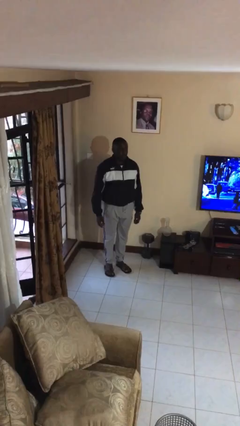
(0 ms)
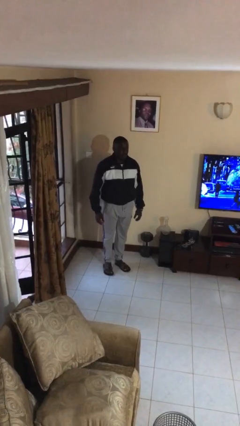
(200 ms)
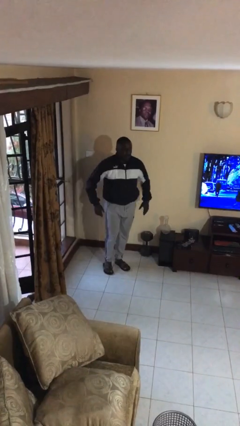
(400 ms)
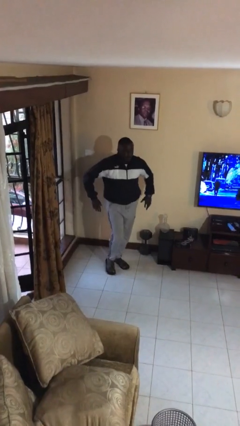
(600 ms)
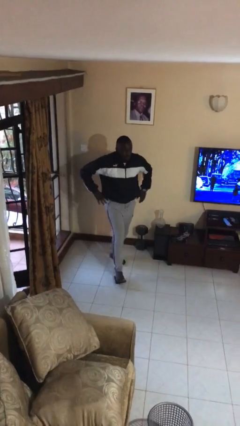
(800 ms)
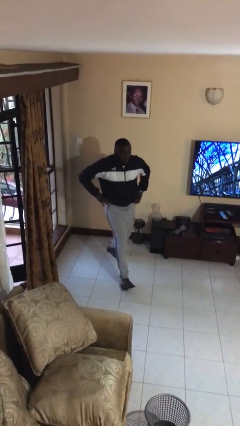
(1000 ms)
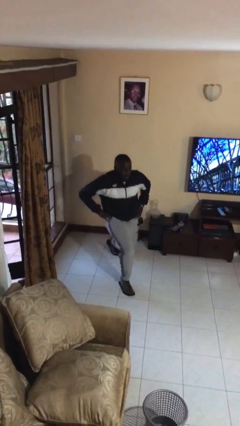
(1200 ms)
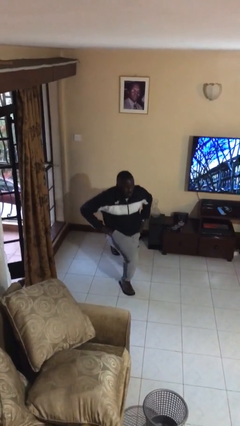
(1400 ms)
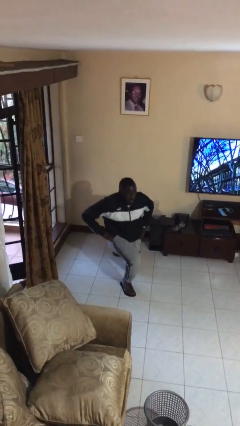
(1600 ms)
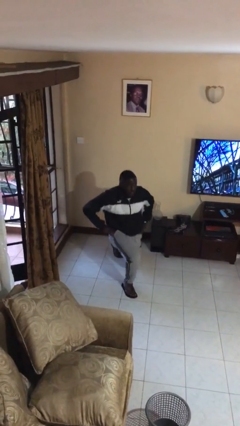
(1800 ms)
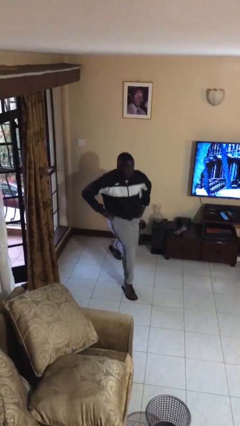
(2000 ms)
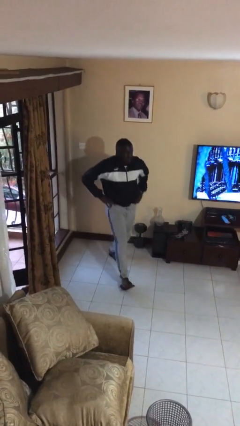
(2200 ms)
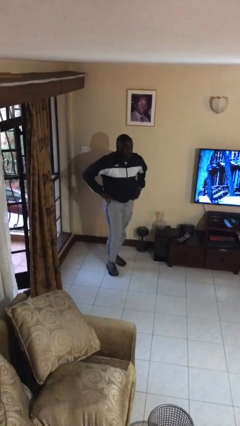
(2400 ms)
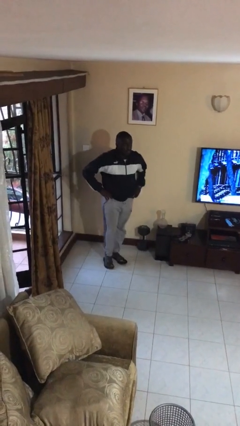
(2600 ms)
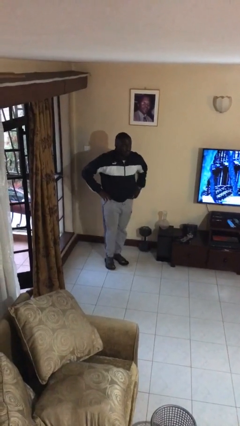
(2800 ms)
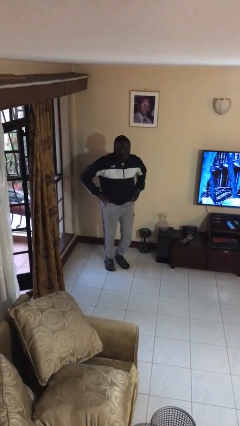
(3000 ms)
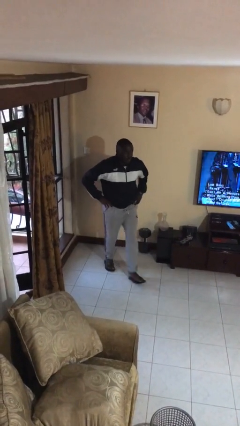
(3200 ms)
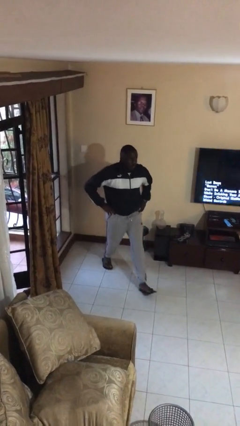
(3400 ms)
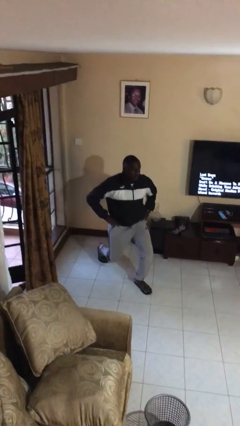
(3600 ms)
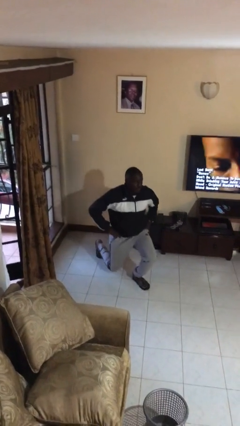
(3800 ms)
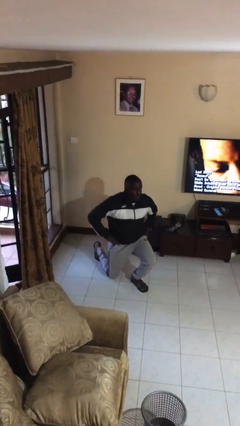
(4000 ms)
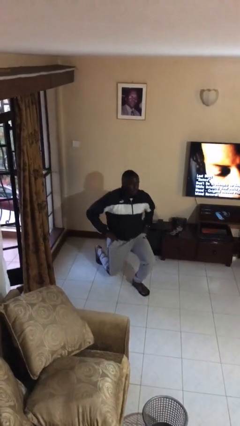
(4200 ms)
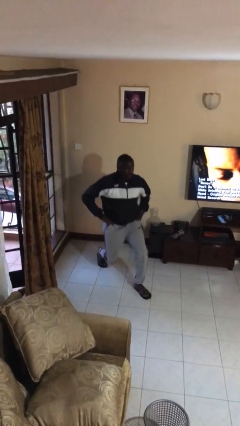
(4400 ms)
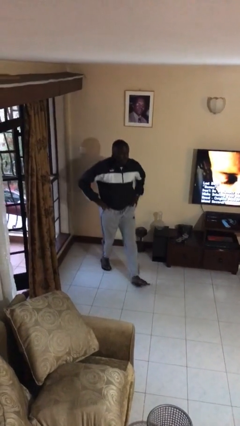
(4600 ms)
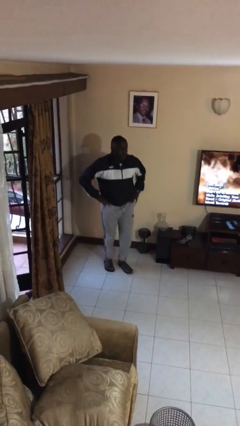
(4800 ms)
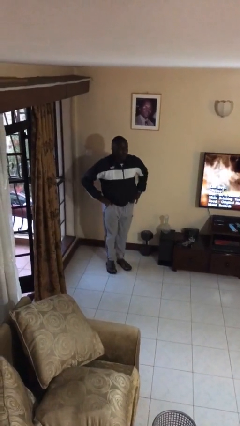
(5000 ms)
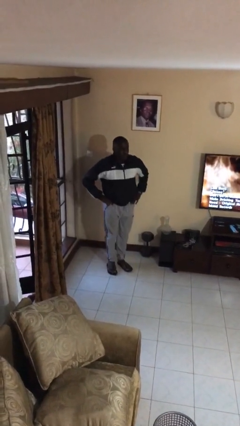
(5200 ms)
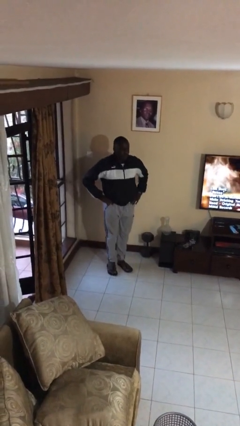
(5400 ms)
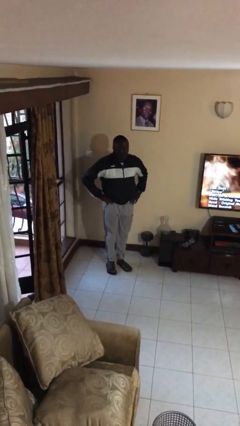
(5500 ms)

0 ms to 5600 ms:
person exercises with lunges

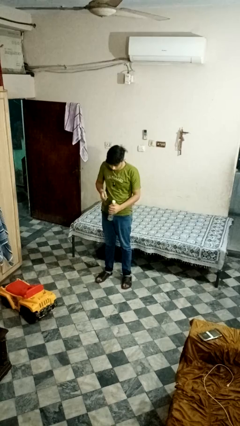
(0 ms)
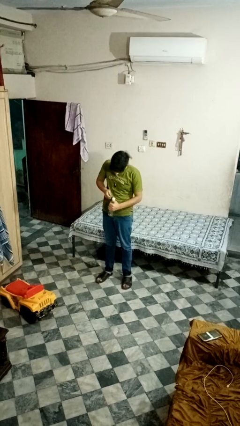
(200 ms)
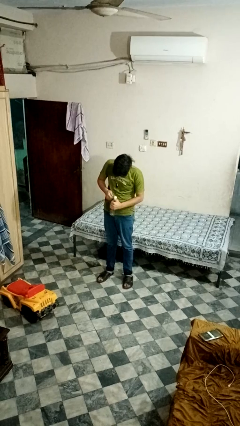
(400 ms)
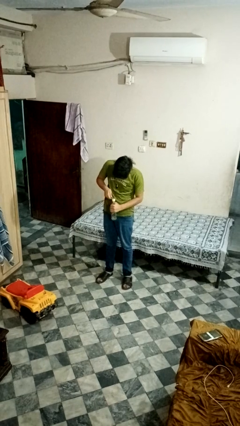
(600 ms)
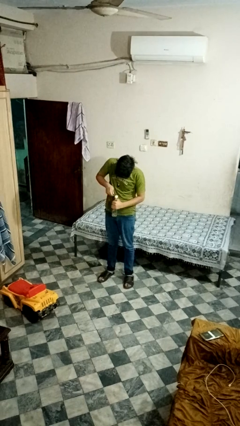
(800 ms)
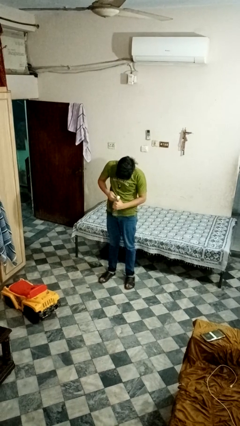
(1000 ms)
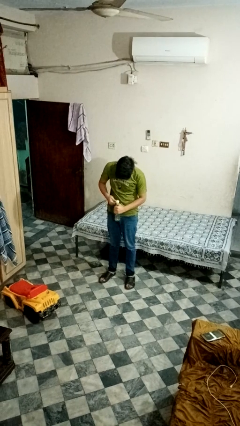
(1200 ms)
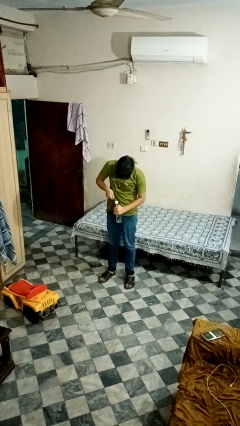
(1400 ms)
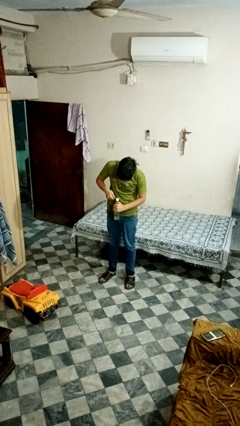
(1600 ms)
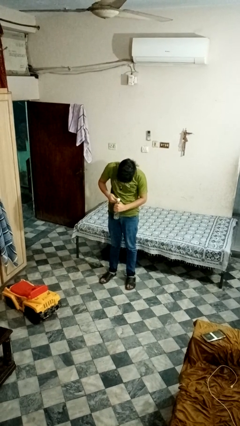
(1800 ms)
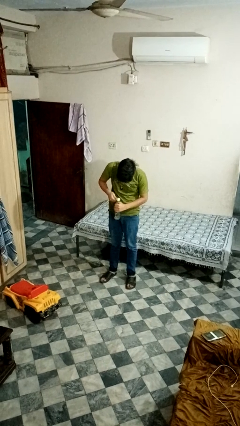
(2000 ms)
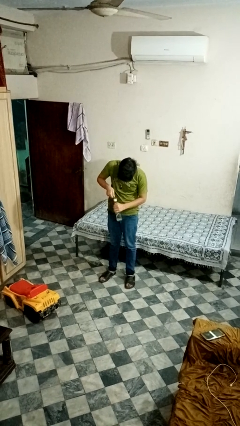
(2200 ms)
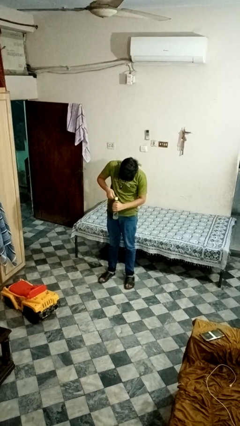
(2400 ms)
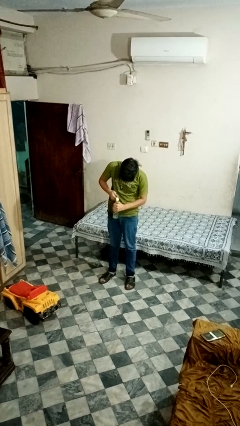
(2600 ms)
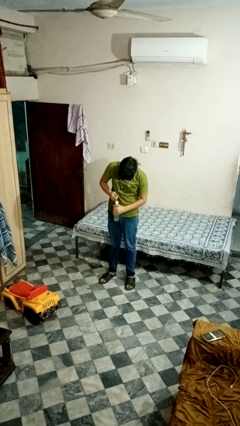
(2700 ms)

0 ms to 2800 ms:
person opens can with can opener

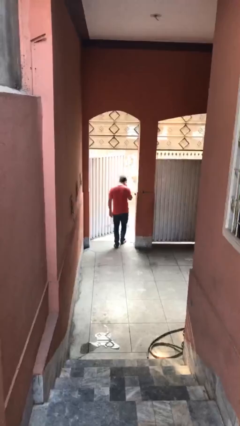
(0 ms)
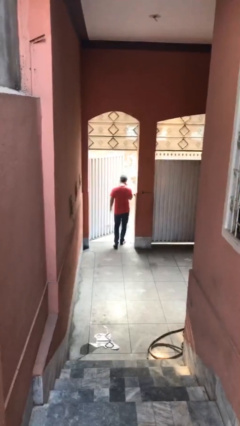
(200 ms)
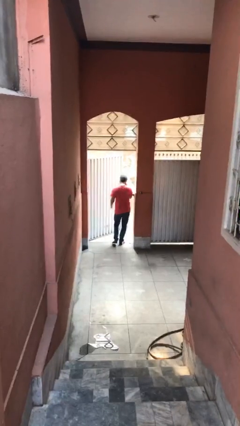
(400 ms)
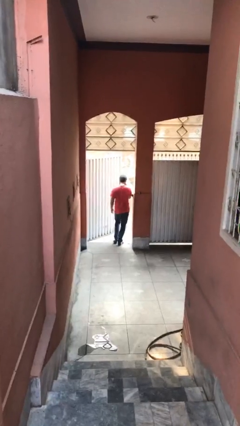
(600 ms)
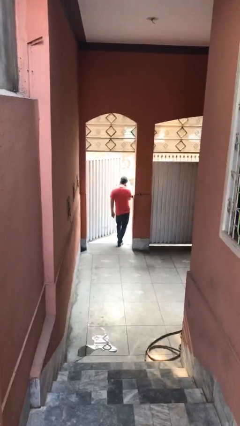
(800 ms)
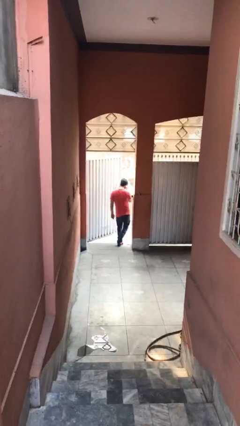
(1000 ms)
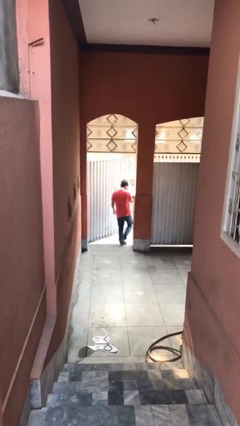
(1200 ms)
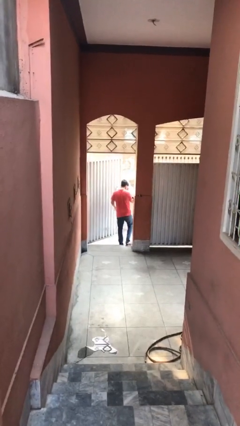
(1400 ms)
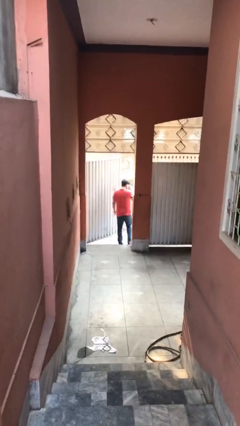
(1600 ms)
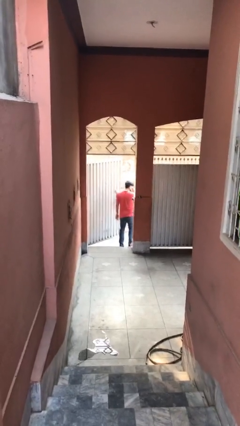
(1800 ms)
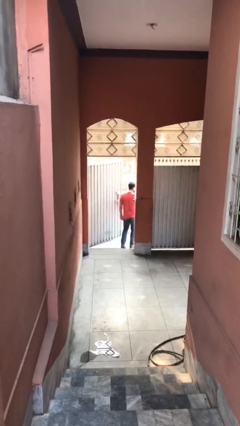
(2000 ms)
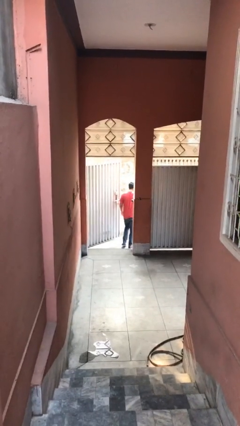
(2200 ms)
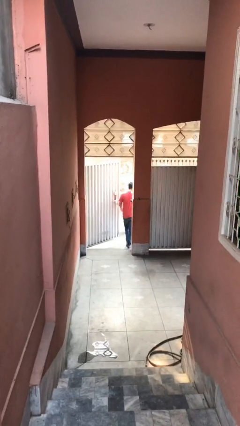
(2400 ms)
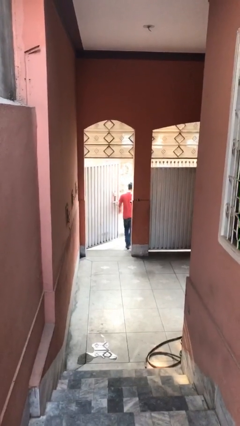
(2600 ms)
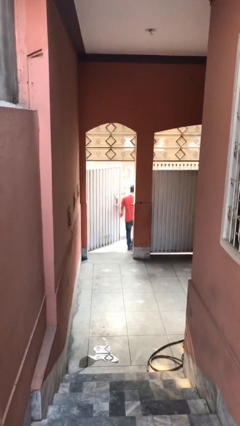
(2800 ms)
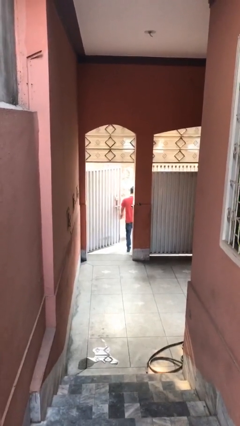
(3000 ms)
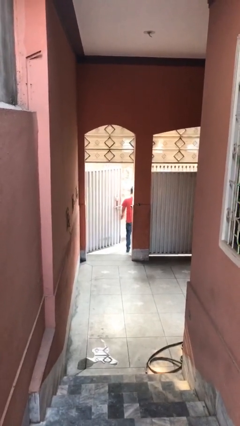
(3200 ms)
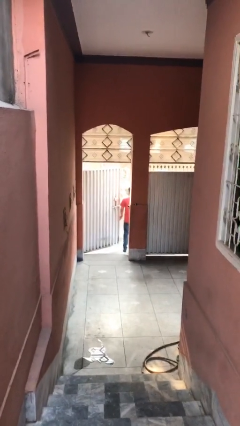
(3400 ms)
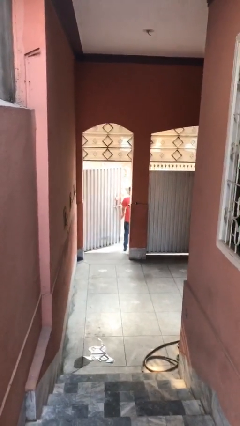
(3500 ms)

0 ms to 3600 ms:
person exits scene through structure

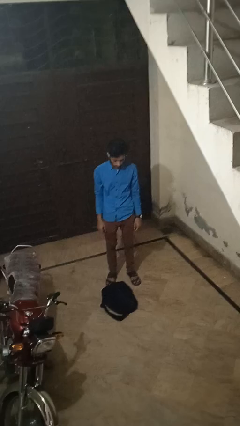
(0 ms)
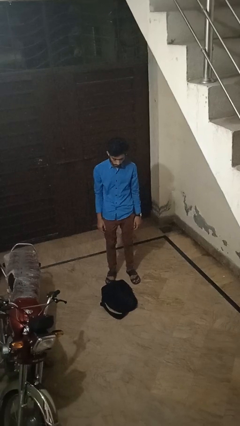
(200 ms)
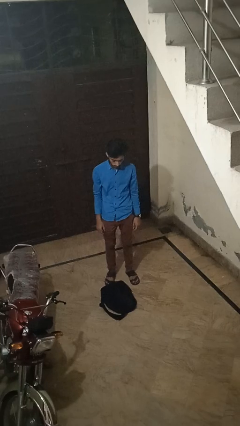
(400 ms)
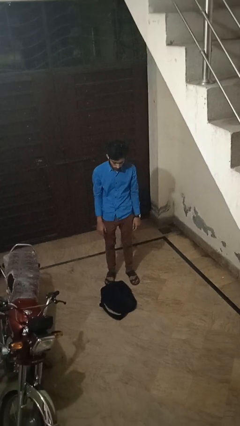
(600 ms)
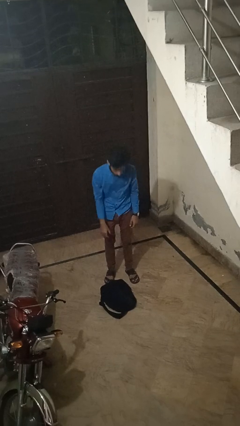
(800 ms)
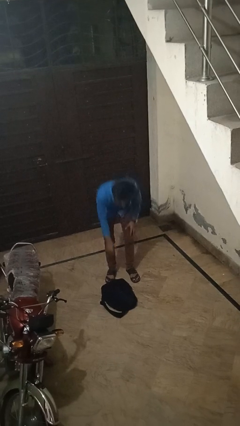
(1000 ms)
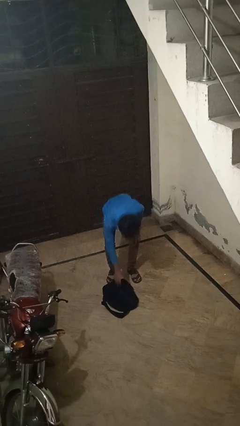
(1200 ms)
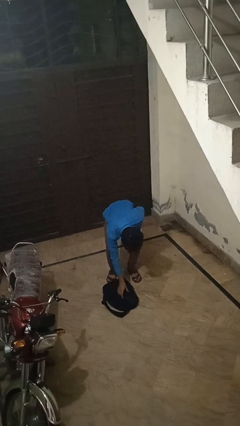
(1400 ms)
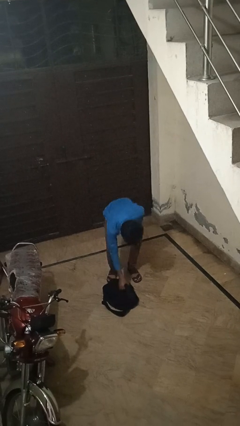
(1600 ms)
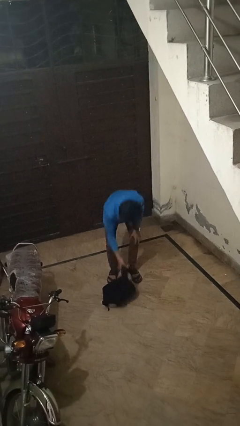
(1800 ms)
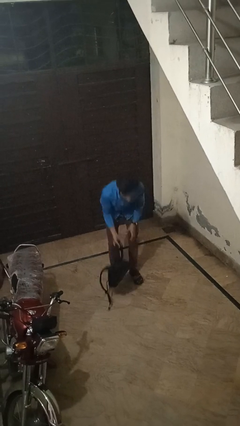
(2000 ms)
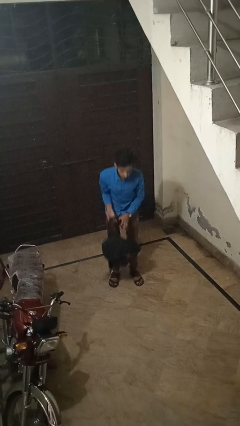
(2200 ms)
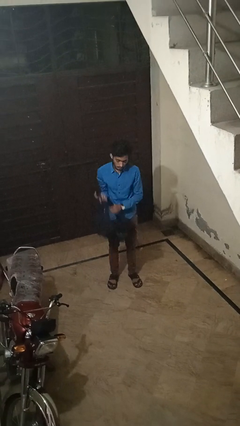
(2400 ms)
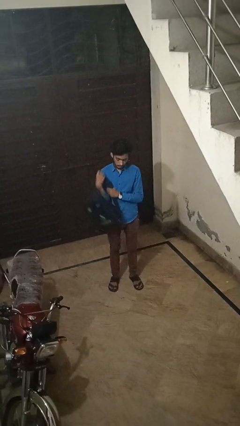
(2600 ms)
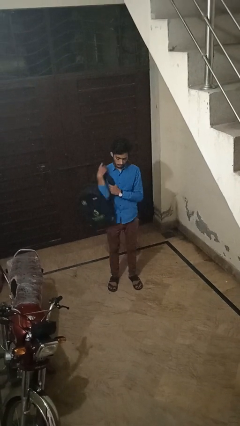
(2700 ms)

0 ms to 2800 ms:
person picks up object from floor

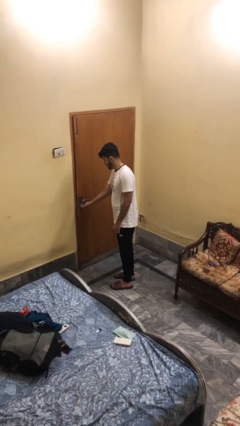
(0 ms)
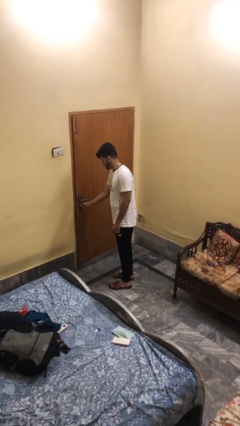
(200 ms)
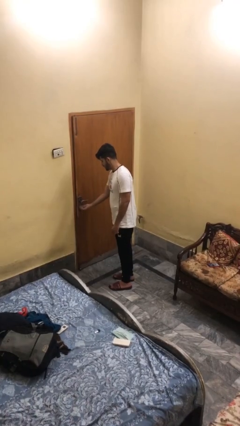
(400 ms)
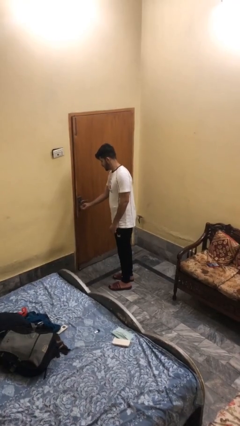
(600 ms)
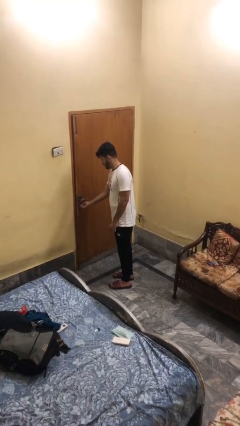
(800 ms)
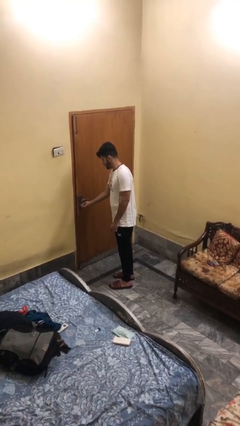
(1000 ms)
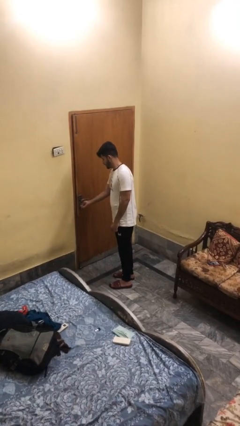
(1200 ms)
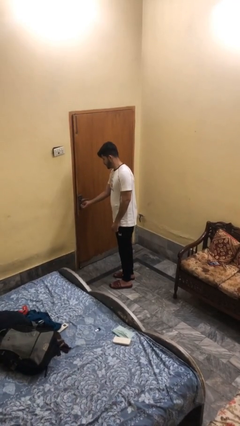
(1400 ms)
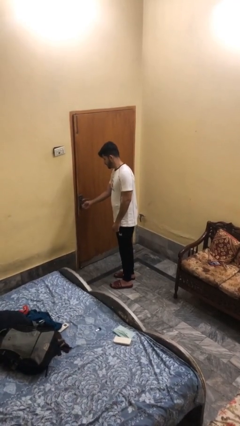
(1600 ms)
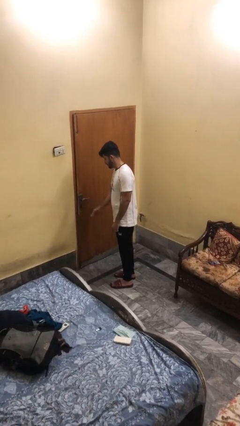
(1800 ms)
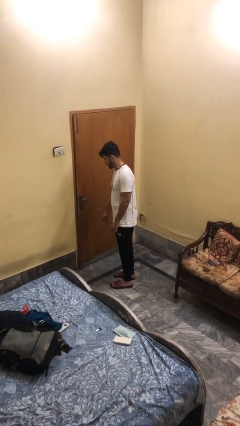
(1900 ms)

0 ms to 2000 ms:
person locks door with keys

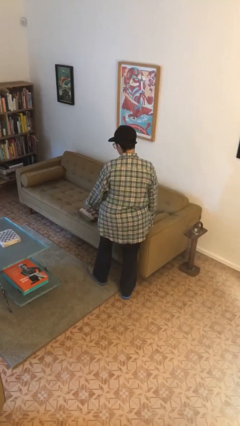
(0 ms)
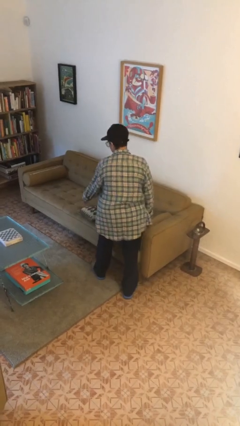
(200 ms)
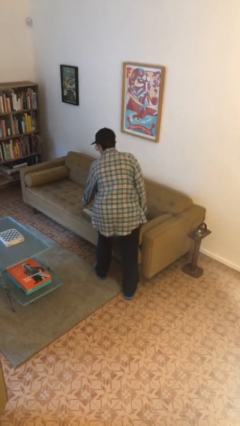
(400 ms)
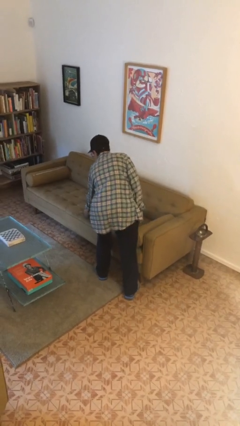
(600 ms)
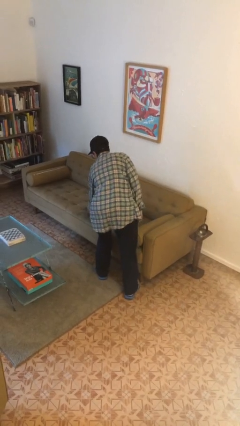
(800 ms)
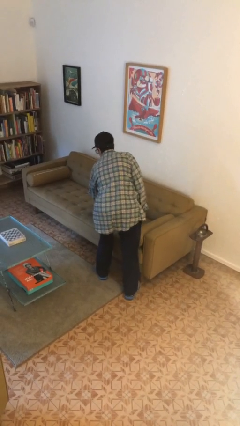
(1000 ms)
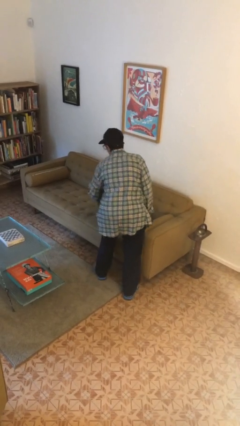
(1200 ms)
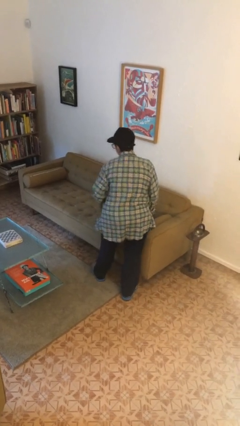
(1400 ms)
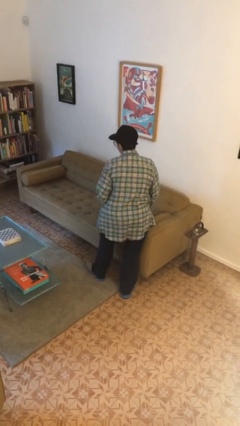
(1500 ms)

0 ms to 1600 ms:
person picks up object from couch
